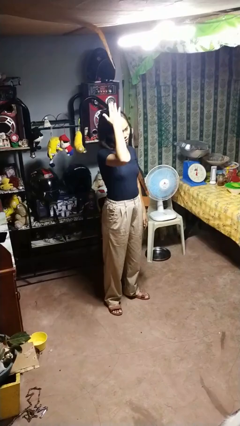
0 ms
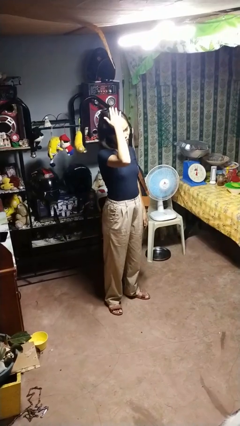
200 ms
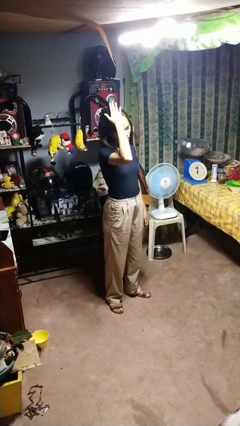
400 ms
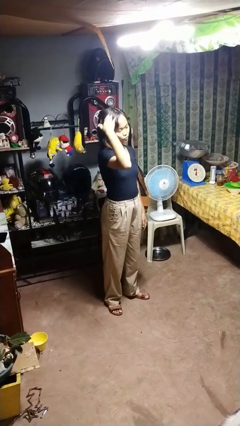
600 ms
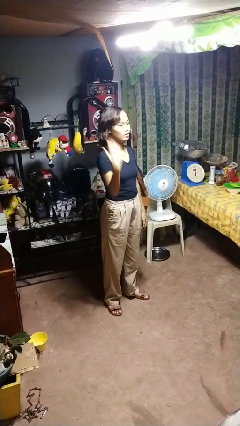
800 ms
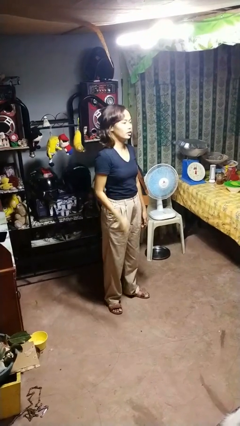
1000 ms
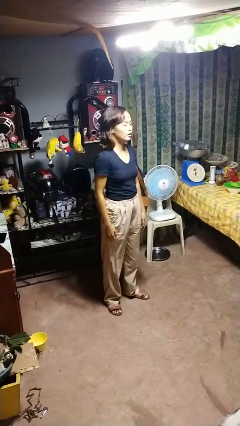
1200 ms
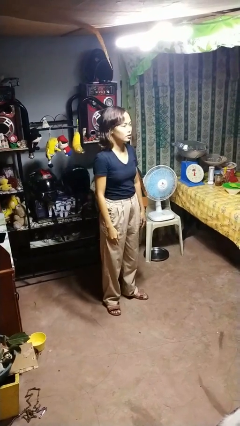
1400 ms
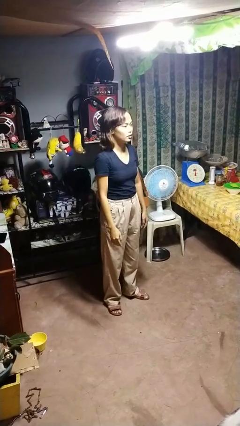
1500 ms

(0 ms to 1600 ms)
person pats head

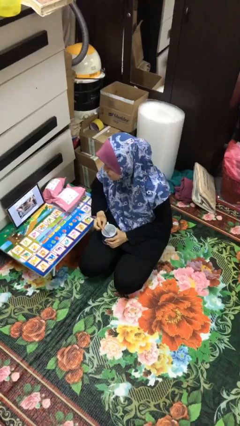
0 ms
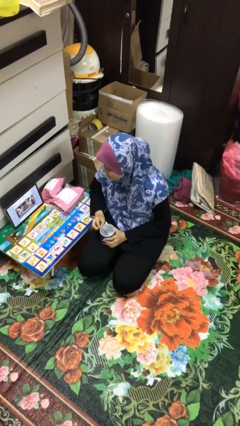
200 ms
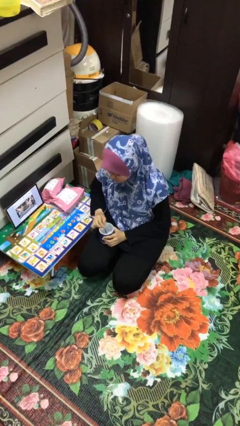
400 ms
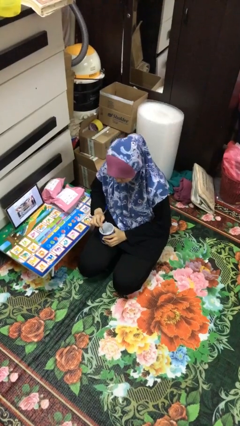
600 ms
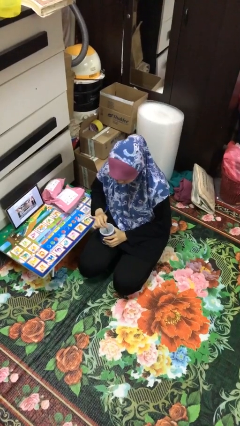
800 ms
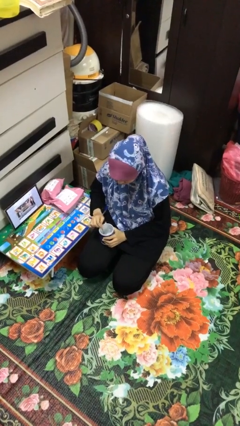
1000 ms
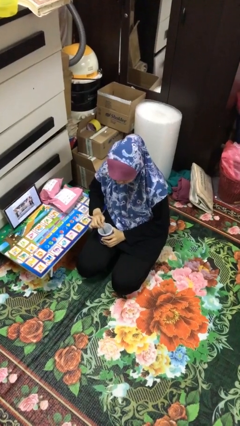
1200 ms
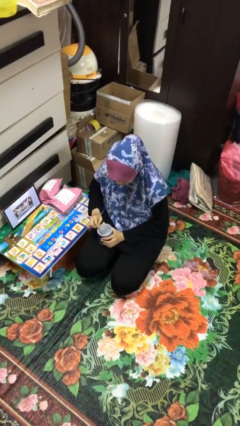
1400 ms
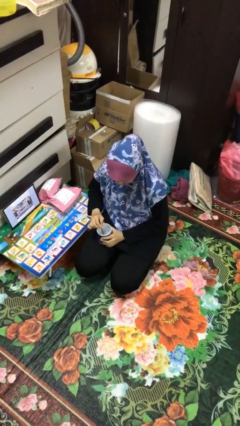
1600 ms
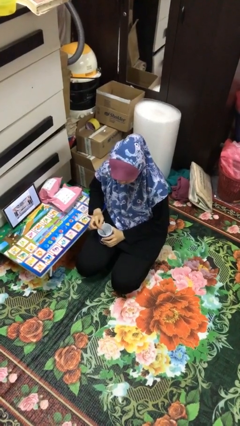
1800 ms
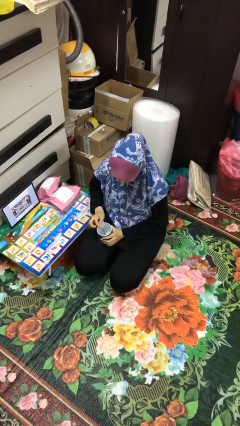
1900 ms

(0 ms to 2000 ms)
person stirs mug

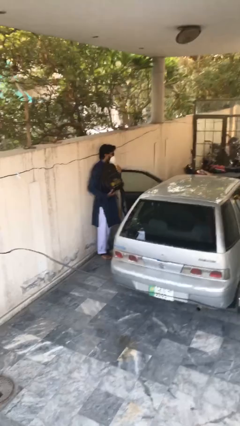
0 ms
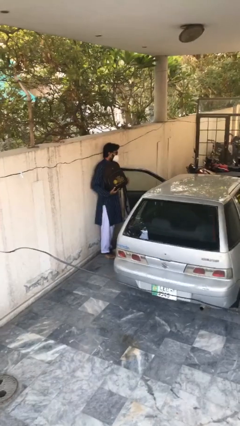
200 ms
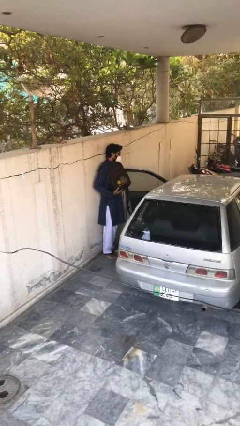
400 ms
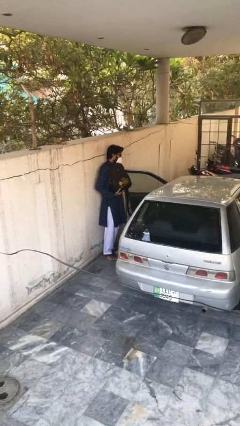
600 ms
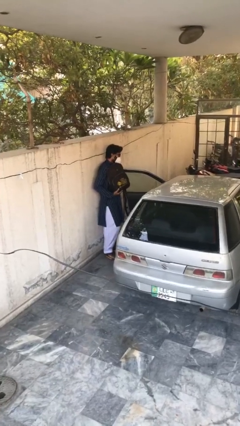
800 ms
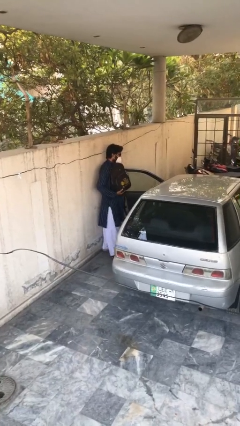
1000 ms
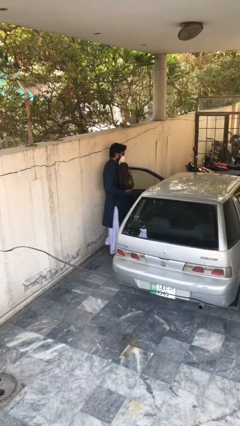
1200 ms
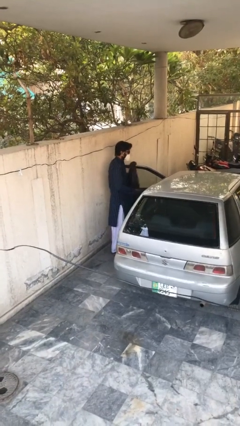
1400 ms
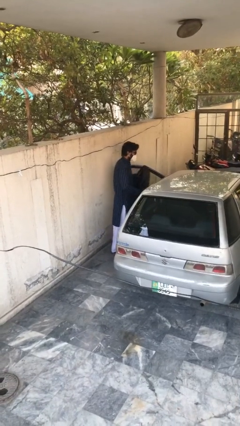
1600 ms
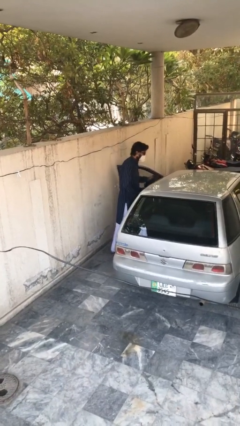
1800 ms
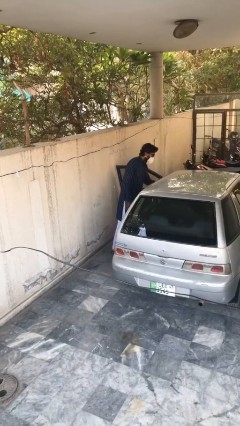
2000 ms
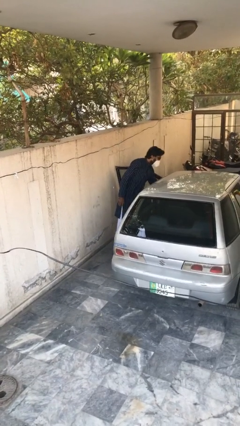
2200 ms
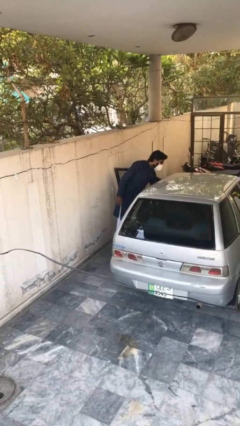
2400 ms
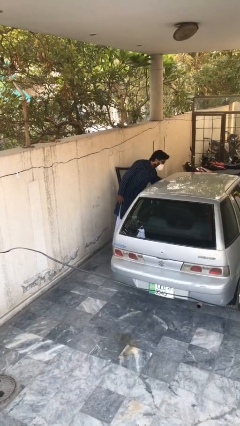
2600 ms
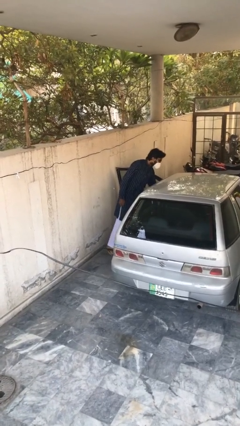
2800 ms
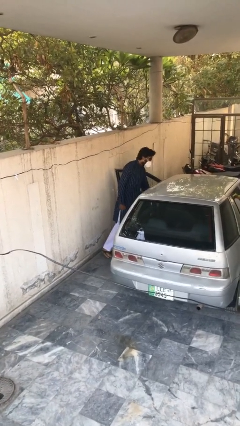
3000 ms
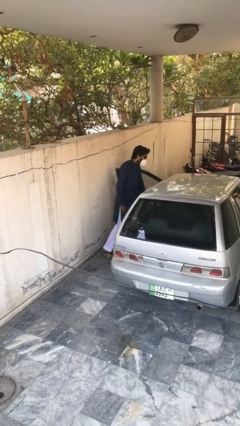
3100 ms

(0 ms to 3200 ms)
person loads car

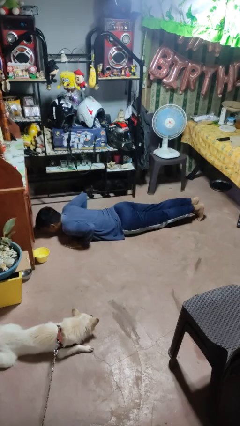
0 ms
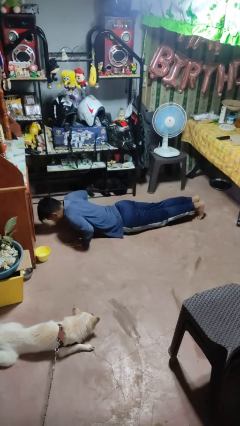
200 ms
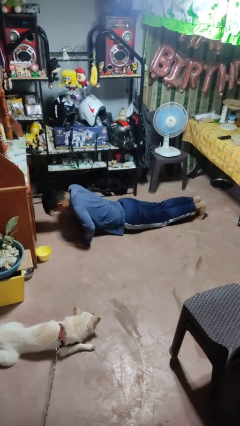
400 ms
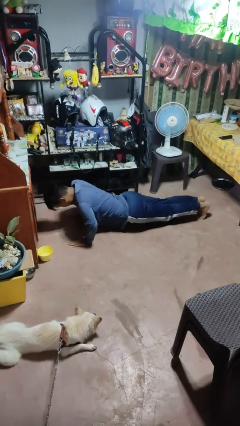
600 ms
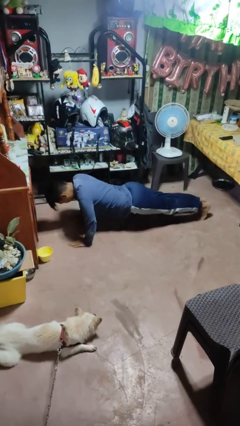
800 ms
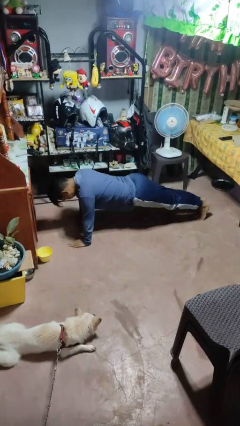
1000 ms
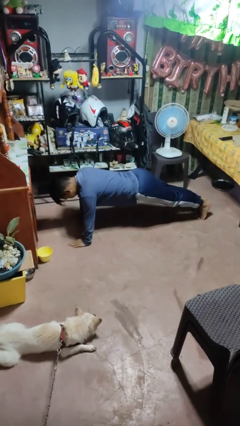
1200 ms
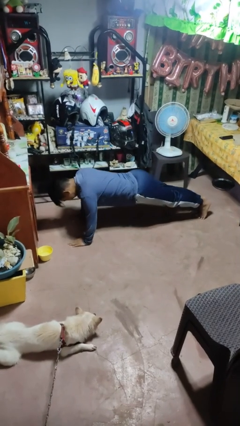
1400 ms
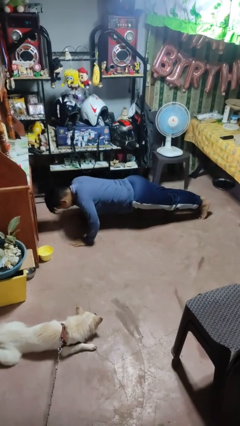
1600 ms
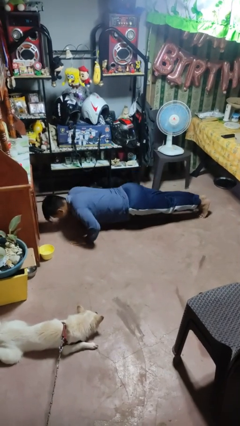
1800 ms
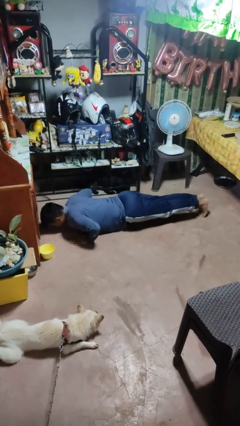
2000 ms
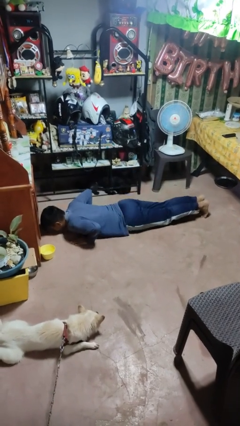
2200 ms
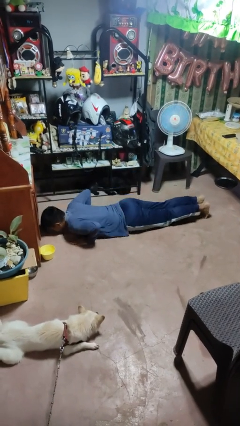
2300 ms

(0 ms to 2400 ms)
person exercises with pushup

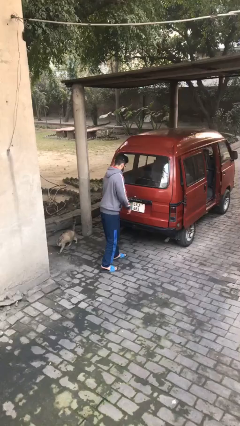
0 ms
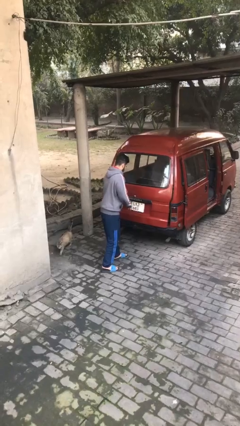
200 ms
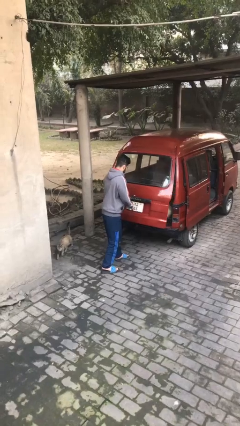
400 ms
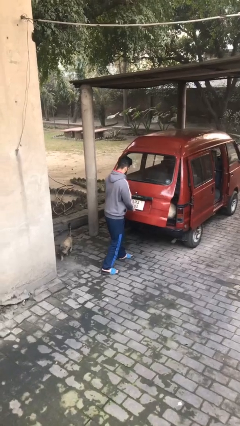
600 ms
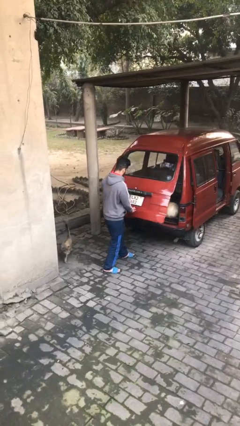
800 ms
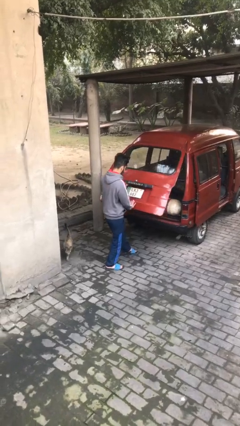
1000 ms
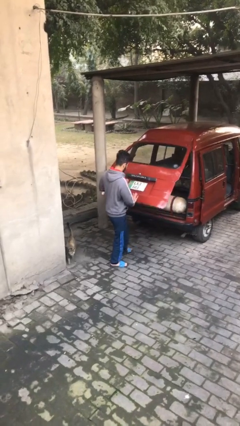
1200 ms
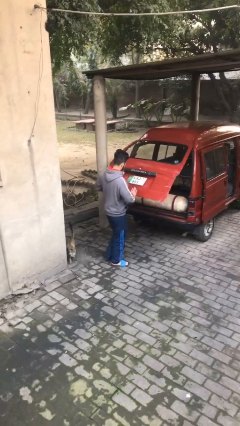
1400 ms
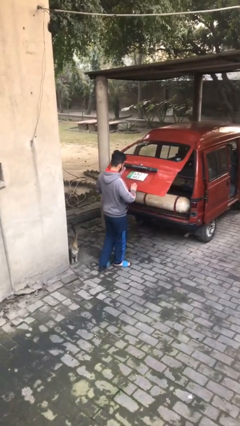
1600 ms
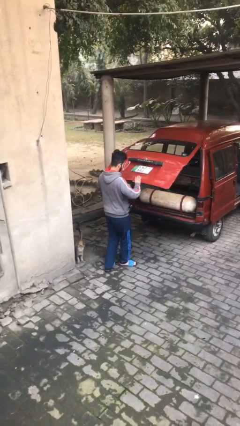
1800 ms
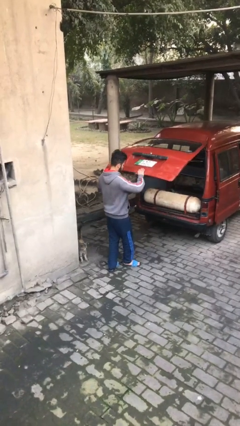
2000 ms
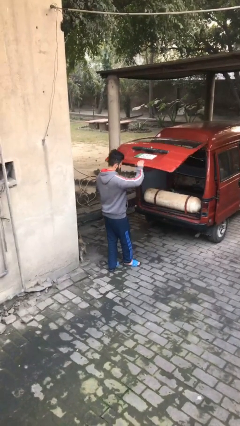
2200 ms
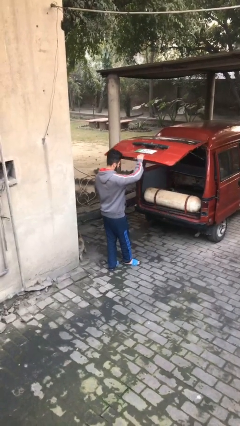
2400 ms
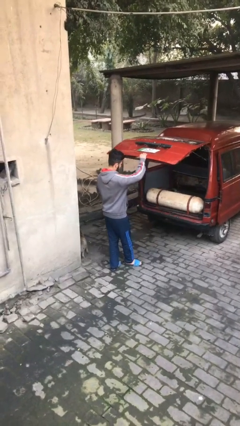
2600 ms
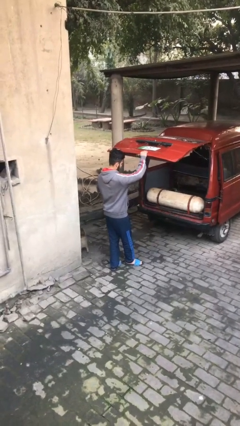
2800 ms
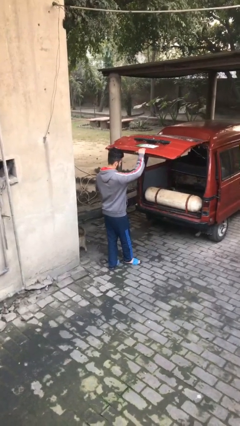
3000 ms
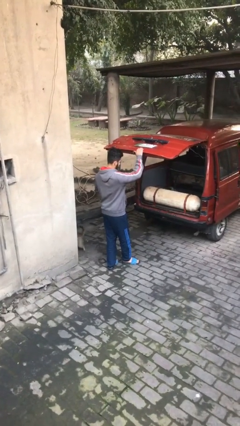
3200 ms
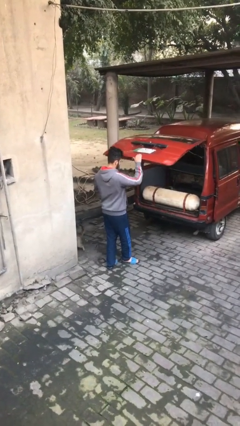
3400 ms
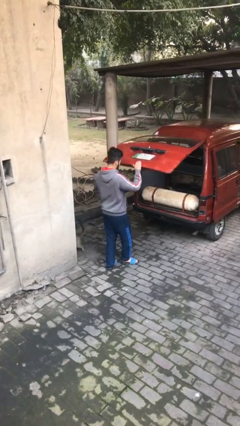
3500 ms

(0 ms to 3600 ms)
person opens car trunk

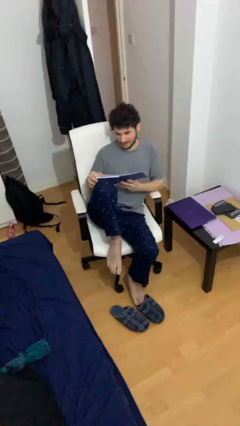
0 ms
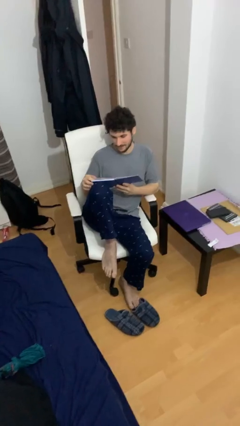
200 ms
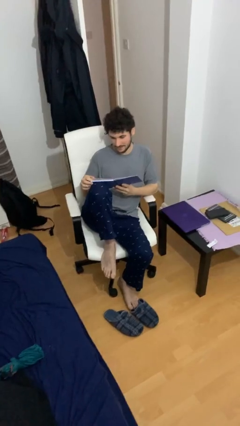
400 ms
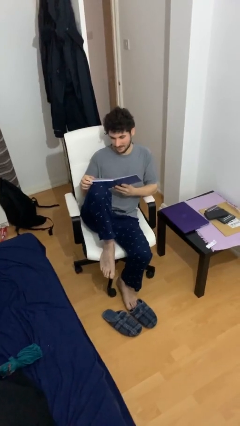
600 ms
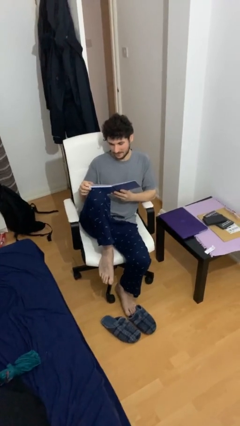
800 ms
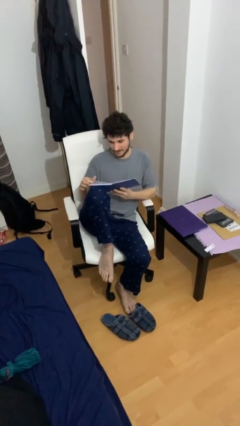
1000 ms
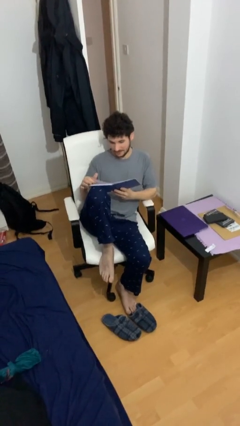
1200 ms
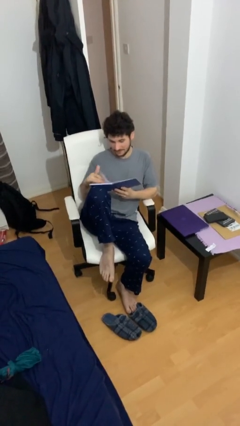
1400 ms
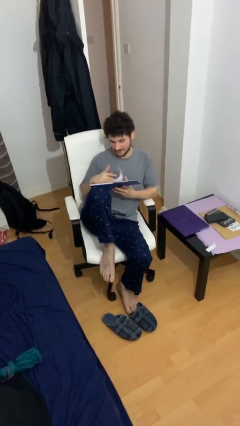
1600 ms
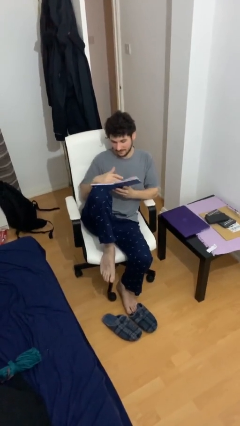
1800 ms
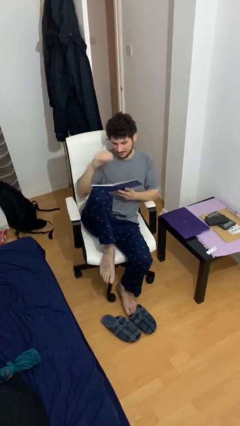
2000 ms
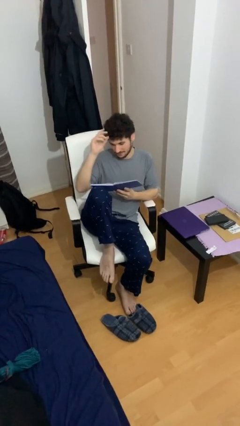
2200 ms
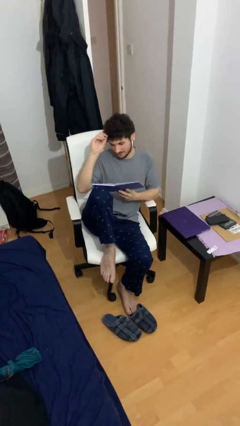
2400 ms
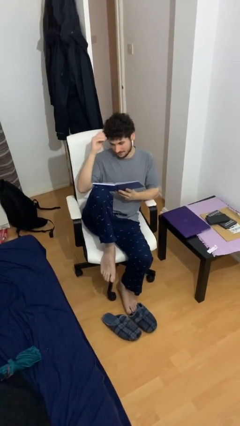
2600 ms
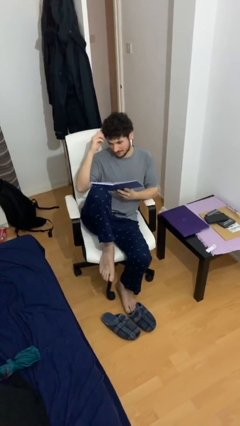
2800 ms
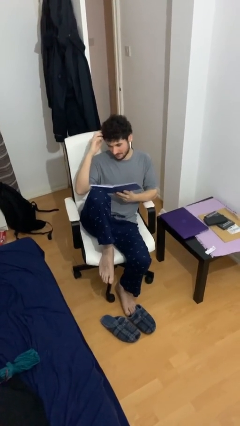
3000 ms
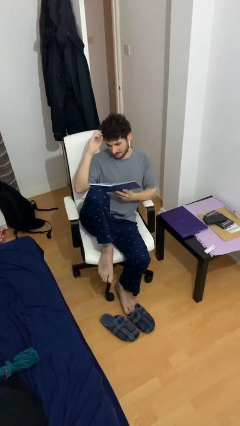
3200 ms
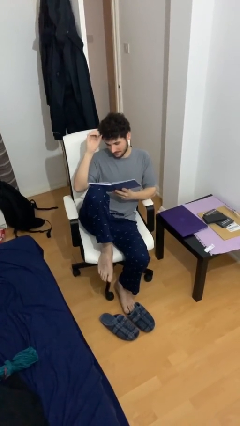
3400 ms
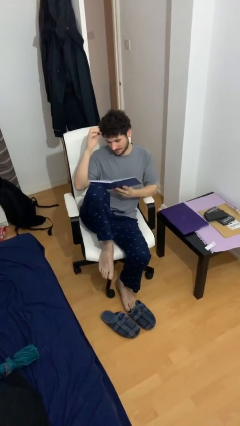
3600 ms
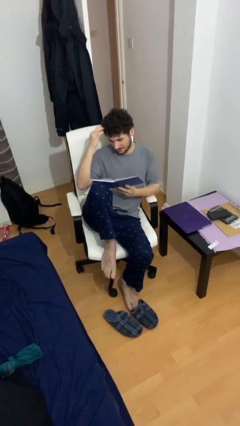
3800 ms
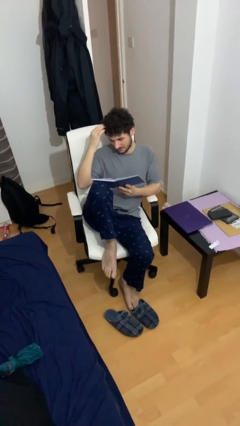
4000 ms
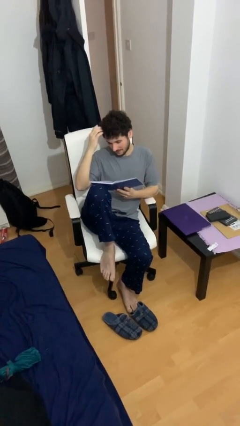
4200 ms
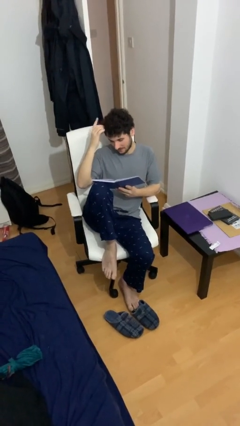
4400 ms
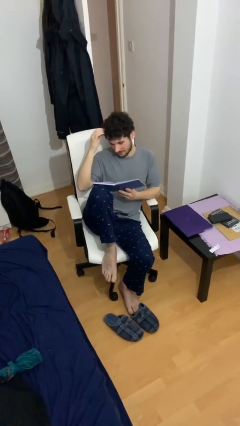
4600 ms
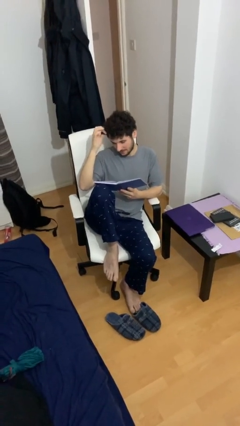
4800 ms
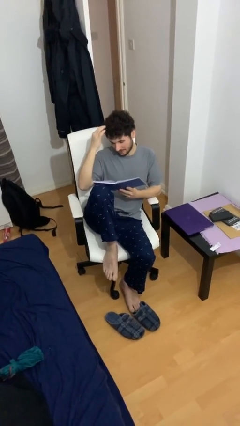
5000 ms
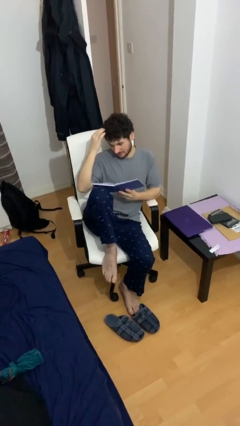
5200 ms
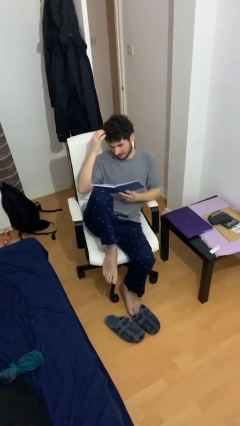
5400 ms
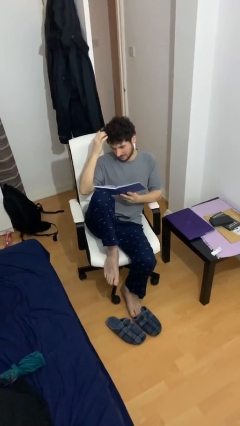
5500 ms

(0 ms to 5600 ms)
person reads document
